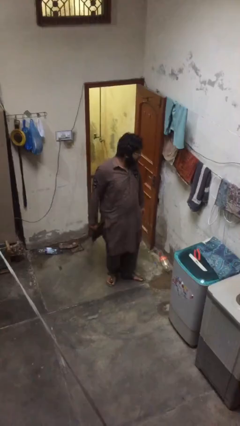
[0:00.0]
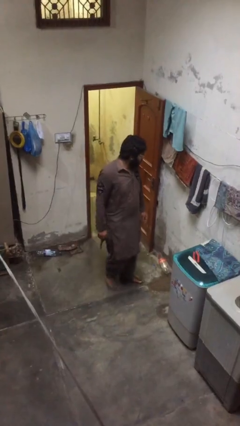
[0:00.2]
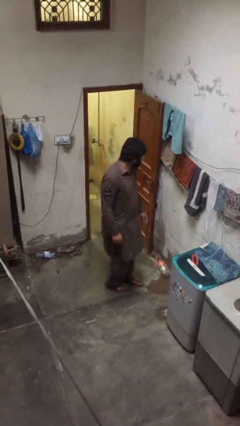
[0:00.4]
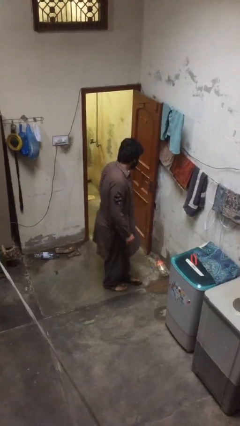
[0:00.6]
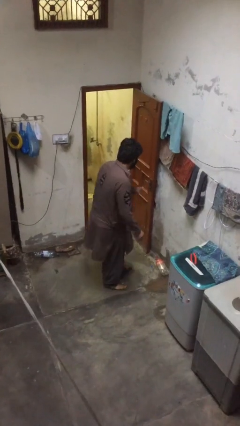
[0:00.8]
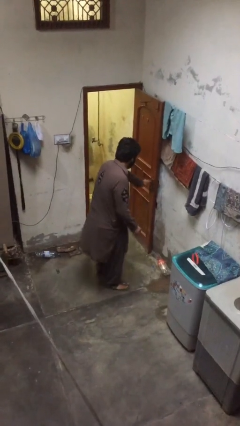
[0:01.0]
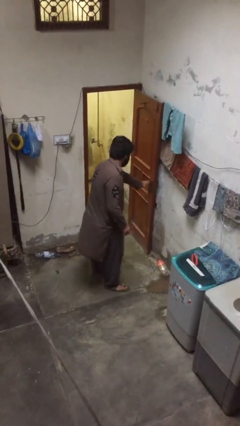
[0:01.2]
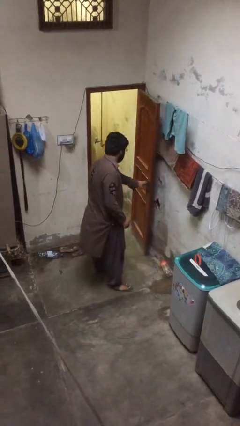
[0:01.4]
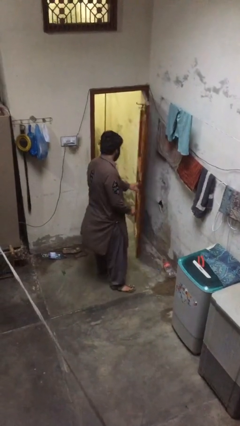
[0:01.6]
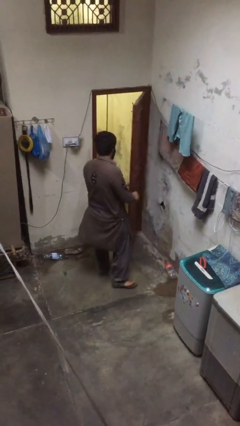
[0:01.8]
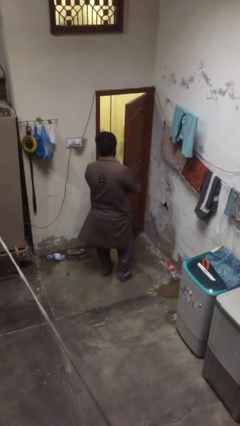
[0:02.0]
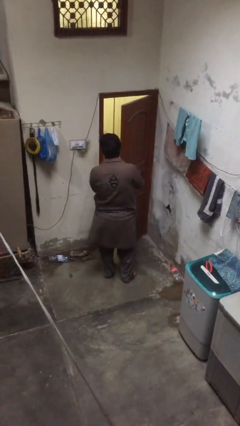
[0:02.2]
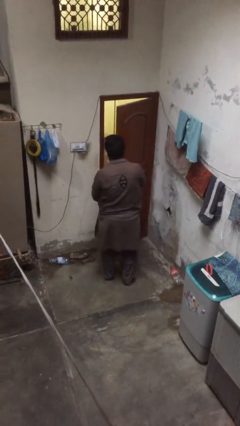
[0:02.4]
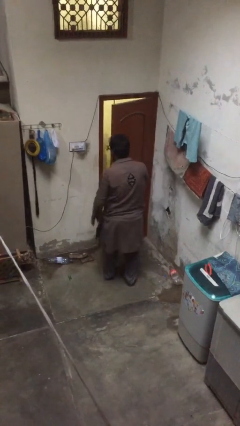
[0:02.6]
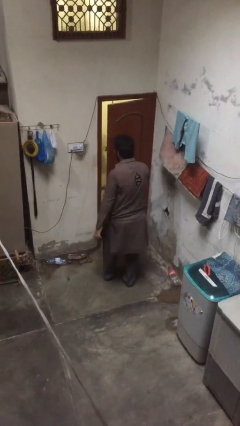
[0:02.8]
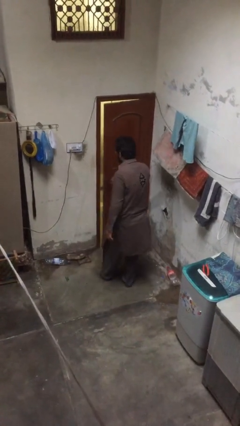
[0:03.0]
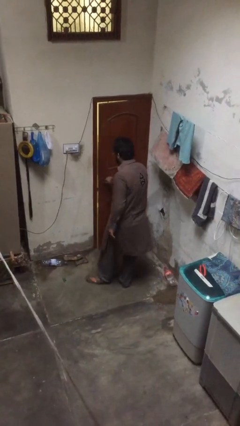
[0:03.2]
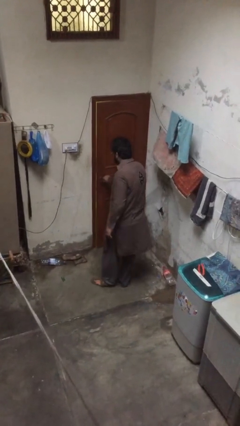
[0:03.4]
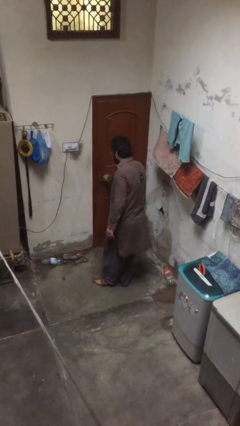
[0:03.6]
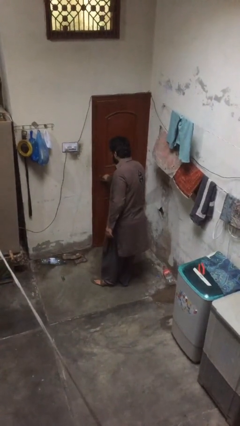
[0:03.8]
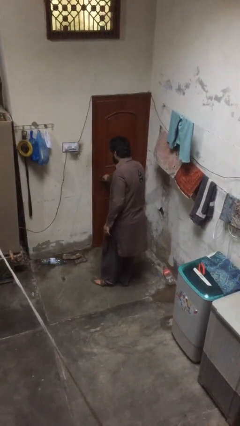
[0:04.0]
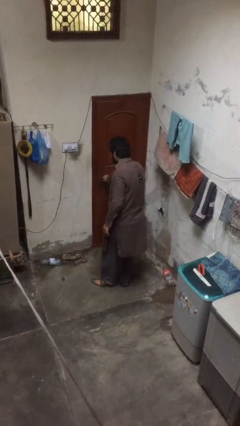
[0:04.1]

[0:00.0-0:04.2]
person closes facility door

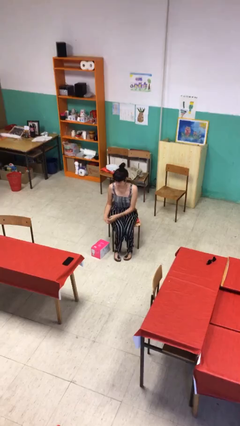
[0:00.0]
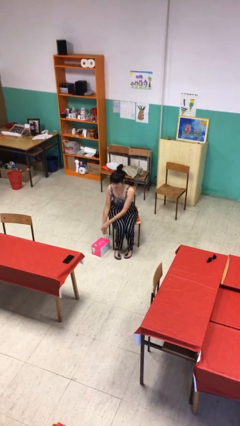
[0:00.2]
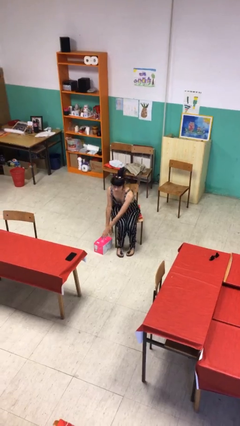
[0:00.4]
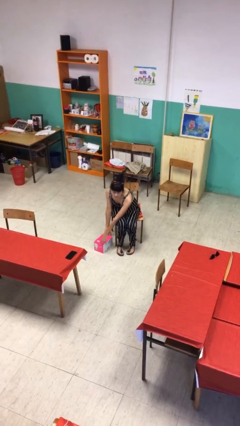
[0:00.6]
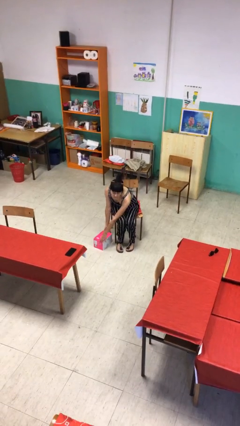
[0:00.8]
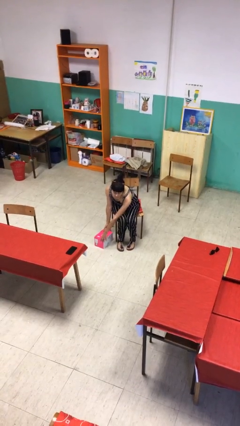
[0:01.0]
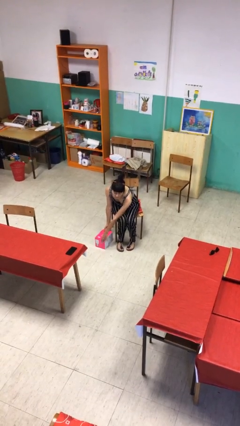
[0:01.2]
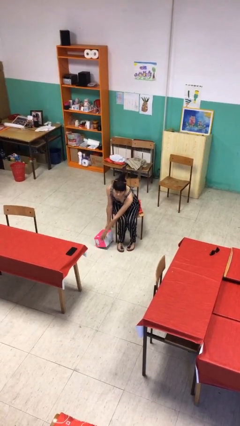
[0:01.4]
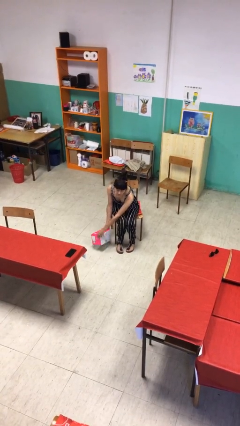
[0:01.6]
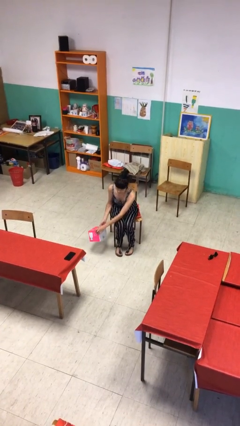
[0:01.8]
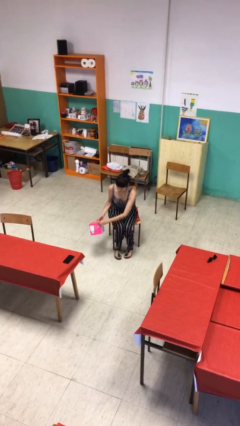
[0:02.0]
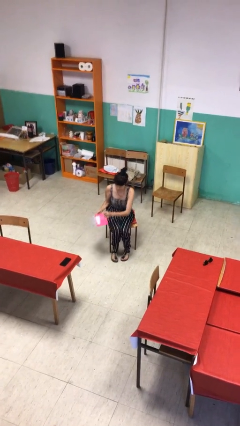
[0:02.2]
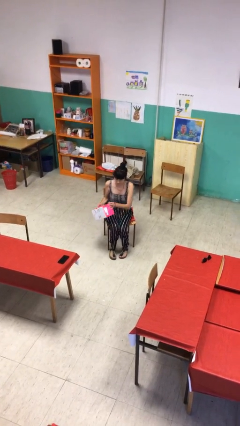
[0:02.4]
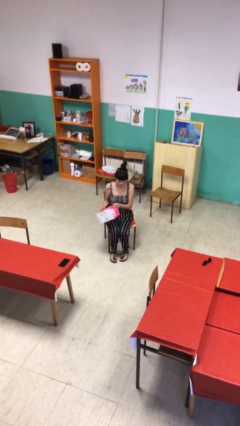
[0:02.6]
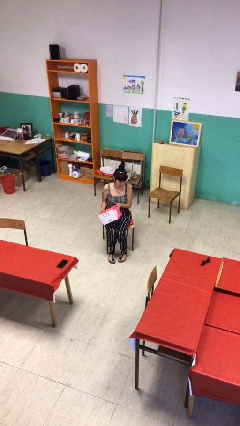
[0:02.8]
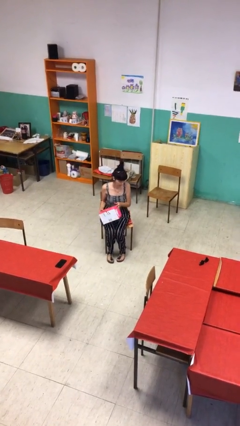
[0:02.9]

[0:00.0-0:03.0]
person picks up object from floor

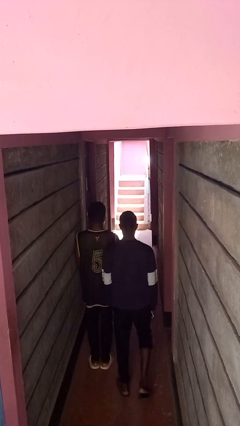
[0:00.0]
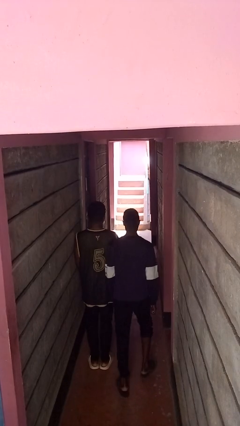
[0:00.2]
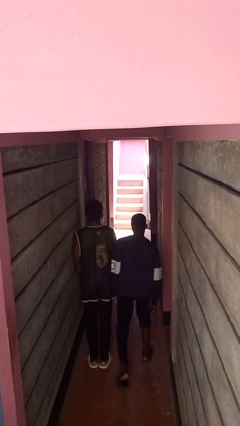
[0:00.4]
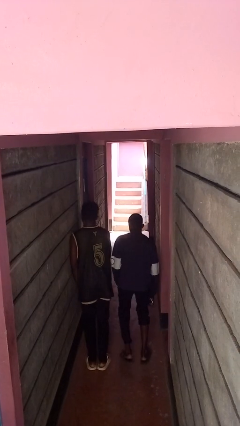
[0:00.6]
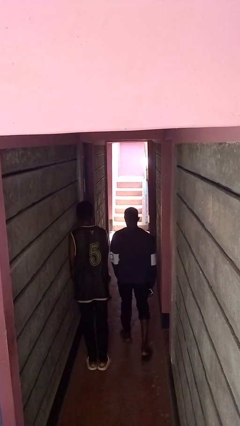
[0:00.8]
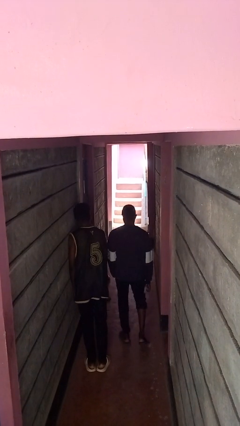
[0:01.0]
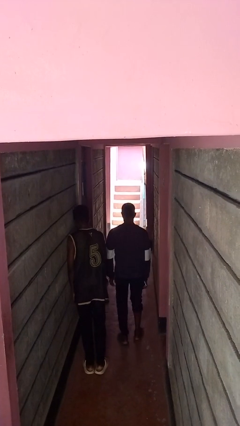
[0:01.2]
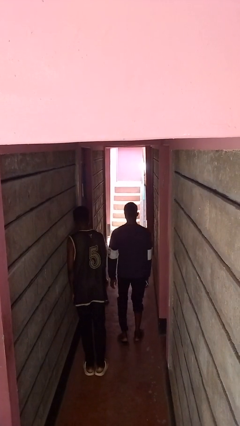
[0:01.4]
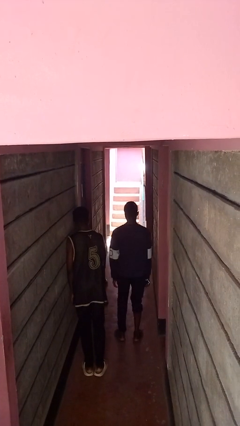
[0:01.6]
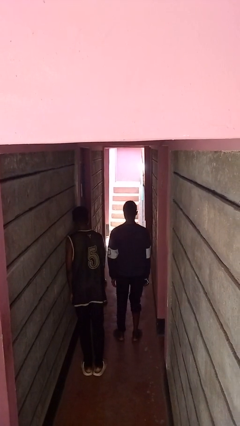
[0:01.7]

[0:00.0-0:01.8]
person bumps into person

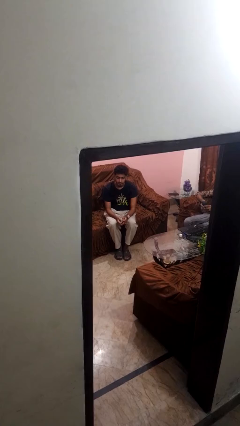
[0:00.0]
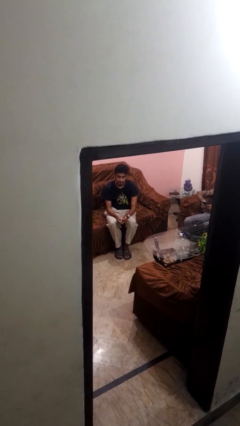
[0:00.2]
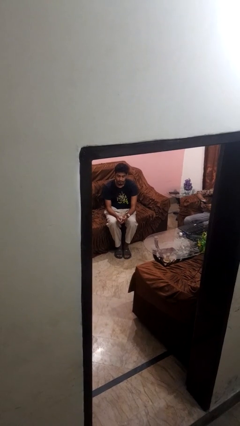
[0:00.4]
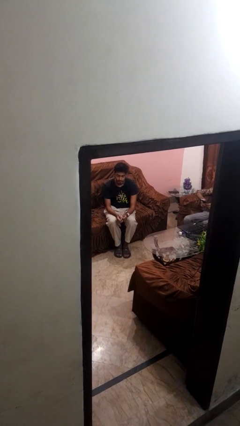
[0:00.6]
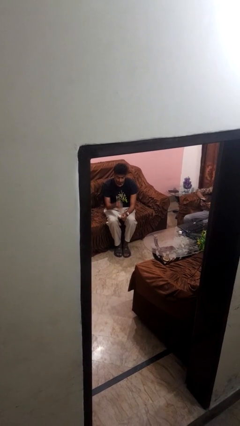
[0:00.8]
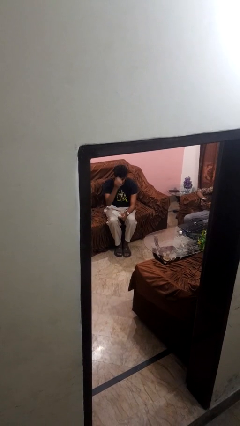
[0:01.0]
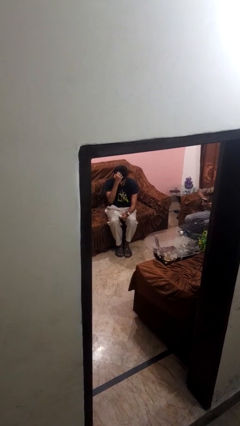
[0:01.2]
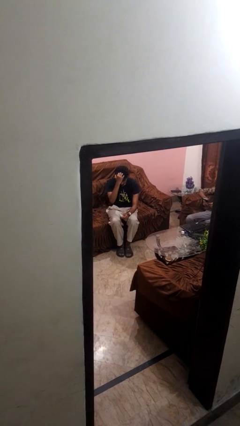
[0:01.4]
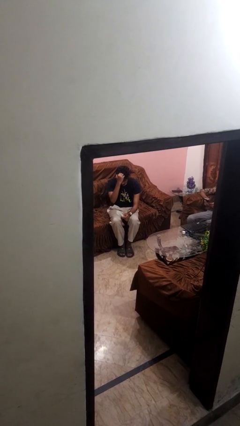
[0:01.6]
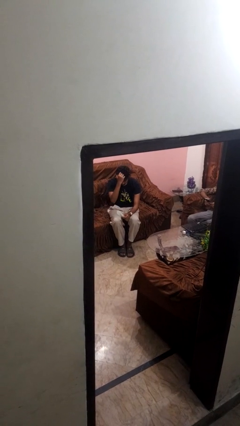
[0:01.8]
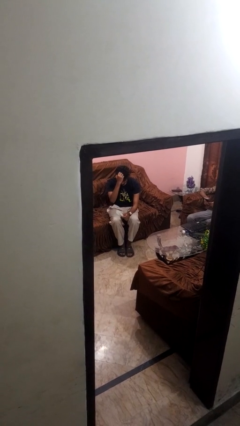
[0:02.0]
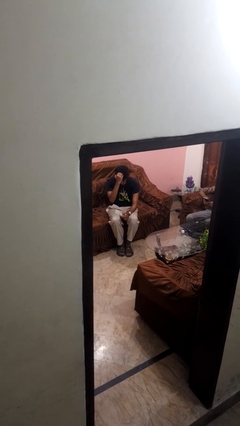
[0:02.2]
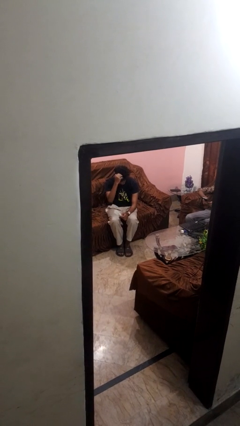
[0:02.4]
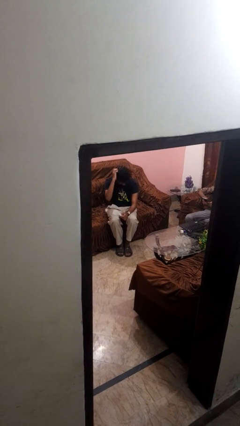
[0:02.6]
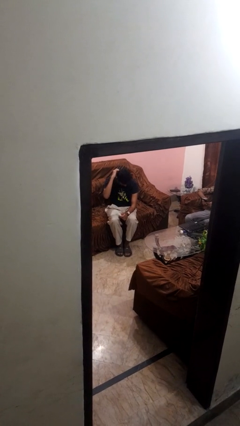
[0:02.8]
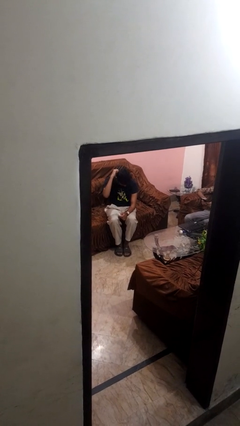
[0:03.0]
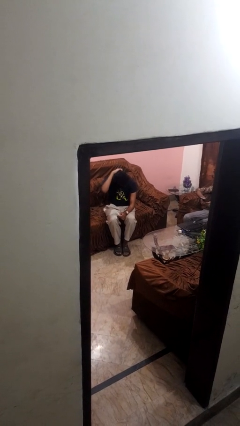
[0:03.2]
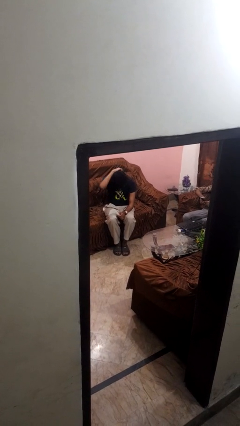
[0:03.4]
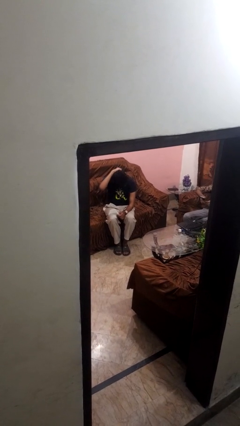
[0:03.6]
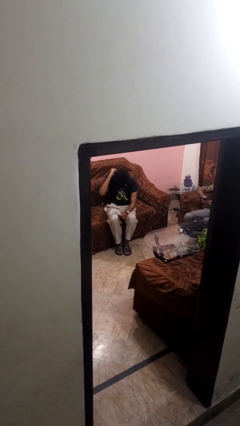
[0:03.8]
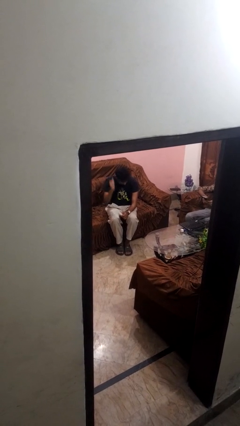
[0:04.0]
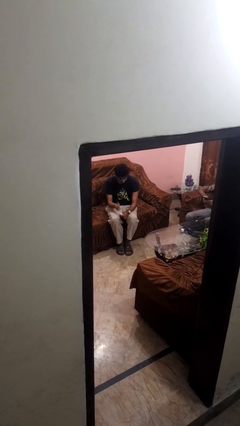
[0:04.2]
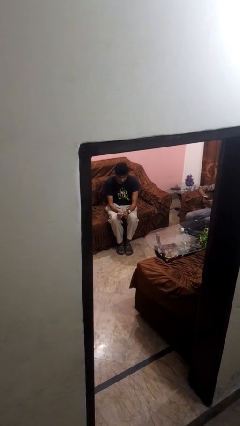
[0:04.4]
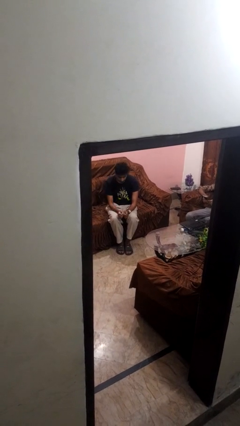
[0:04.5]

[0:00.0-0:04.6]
person scratches face

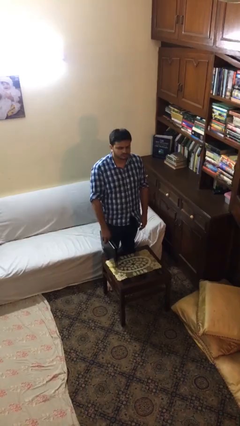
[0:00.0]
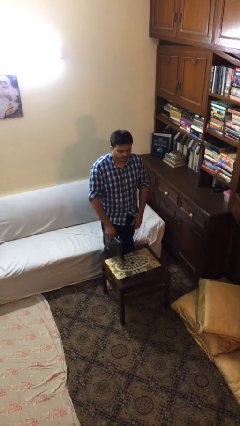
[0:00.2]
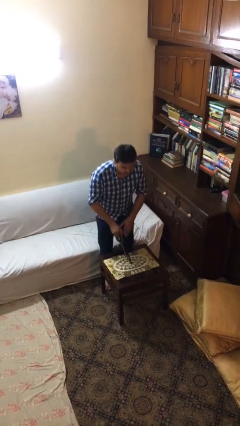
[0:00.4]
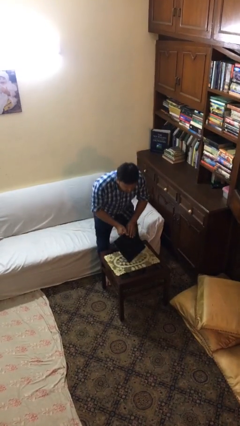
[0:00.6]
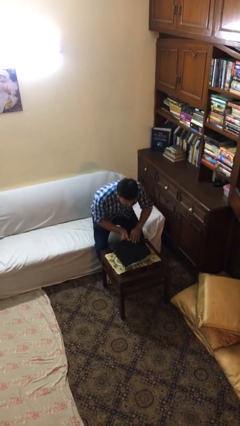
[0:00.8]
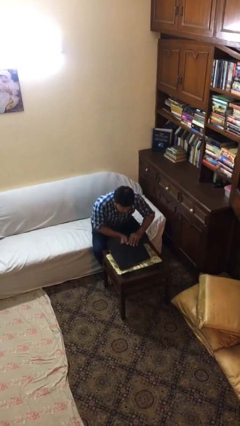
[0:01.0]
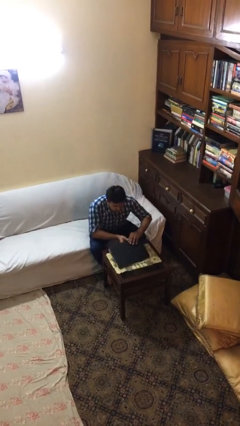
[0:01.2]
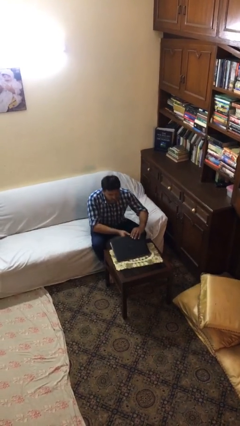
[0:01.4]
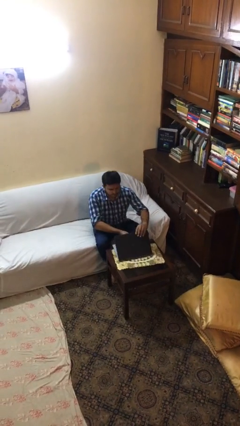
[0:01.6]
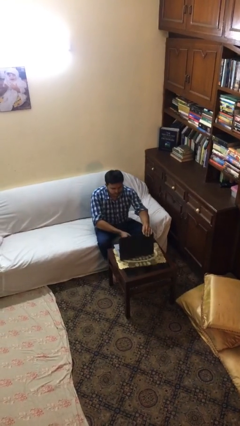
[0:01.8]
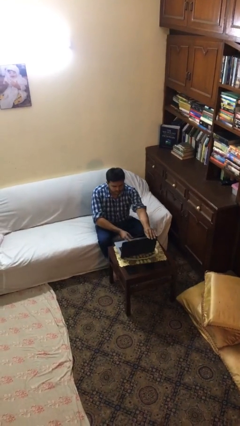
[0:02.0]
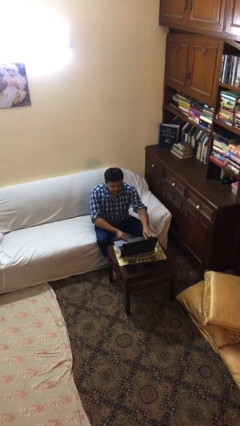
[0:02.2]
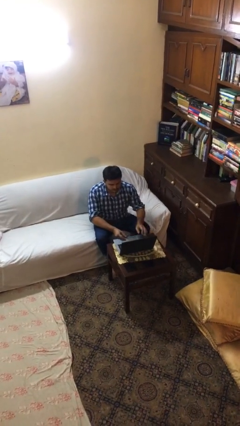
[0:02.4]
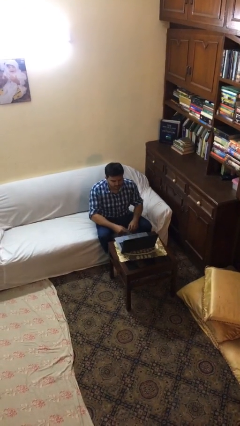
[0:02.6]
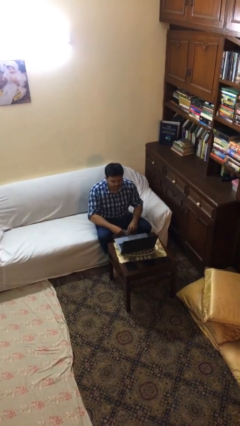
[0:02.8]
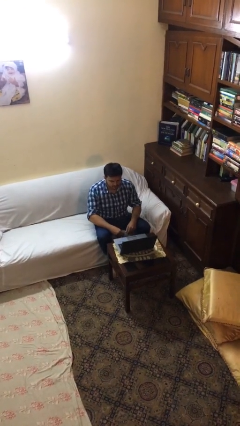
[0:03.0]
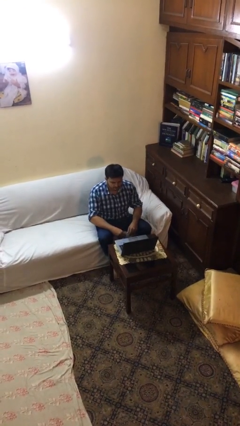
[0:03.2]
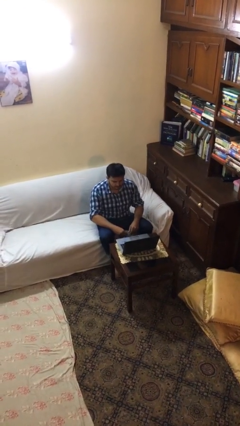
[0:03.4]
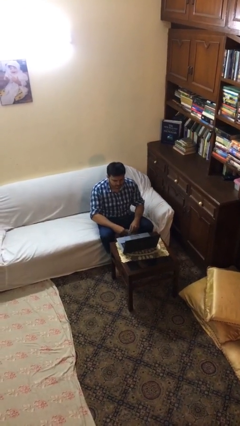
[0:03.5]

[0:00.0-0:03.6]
person sits down
